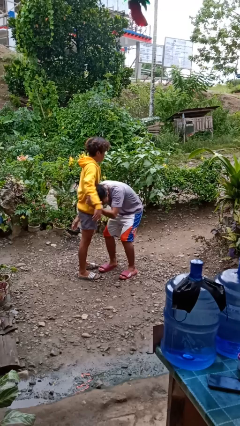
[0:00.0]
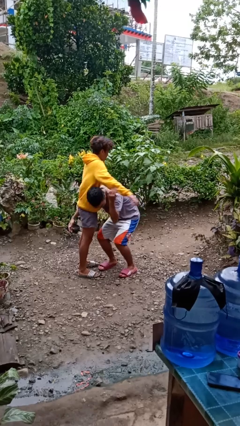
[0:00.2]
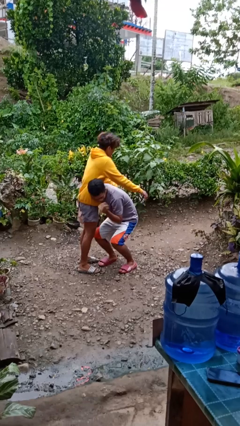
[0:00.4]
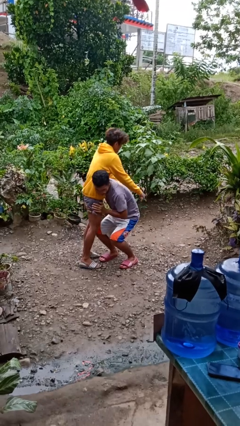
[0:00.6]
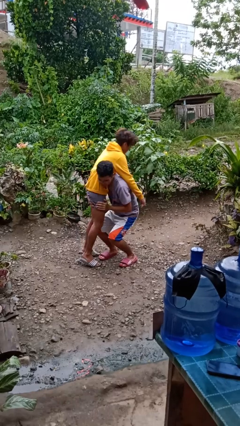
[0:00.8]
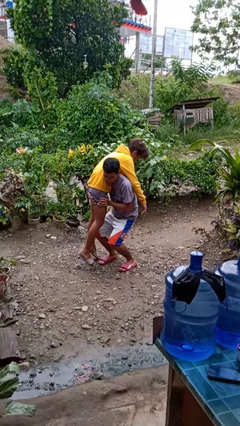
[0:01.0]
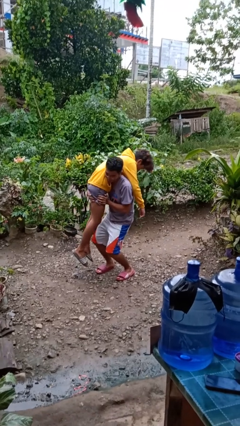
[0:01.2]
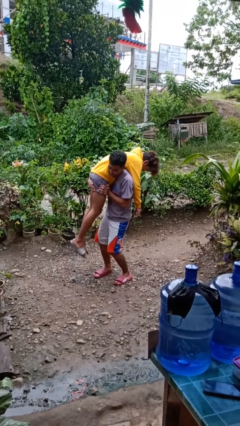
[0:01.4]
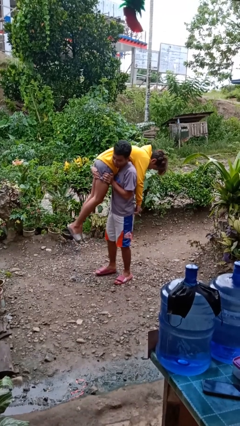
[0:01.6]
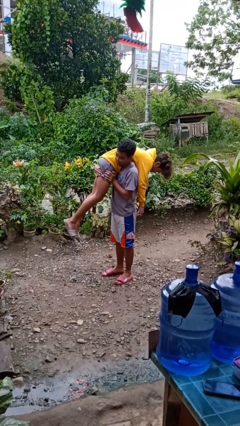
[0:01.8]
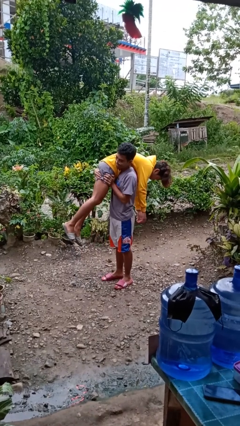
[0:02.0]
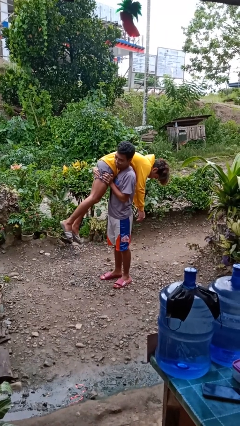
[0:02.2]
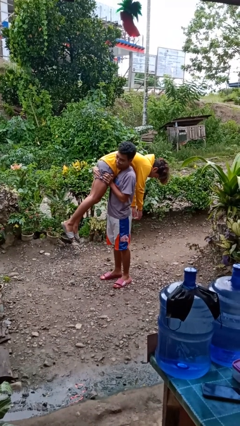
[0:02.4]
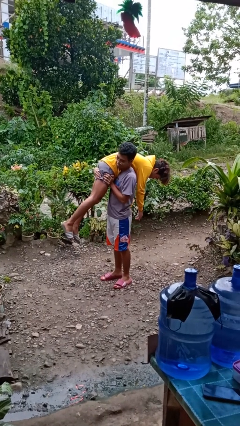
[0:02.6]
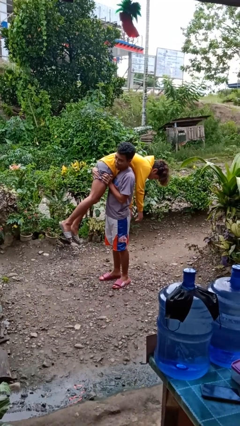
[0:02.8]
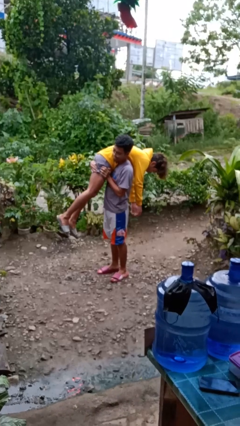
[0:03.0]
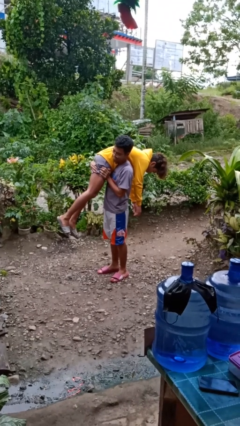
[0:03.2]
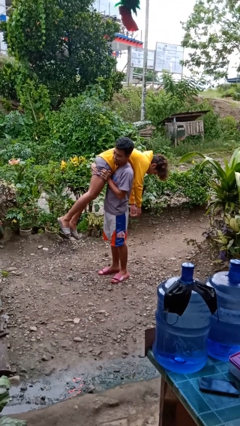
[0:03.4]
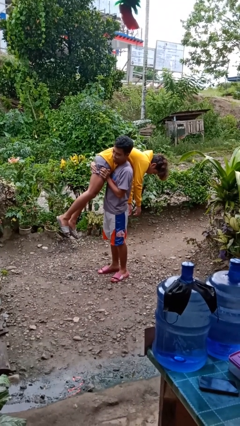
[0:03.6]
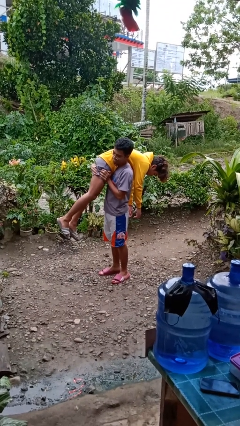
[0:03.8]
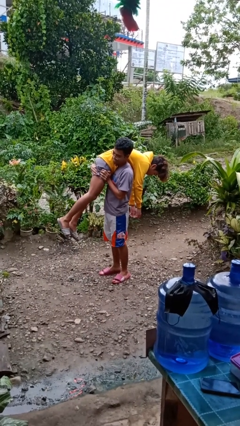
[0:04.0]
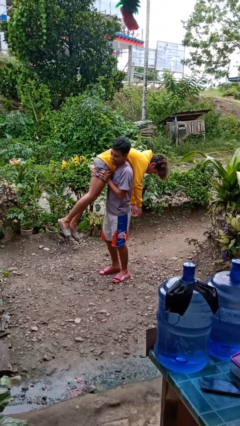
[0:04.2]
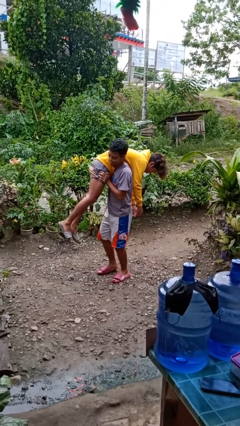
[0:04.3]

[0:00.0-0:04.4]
person carries person over shoulder

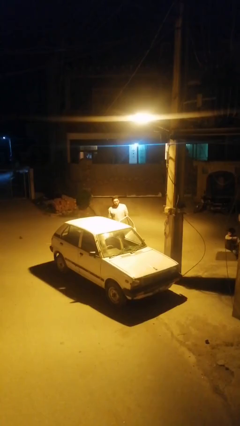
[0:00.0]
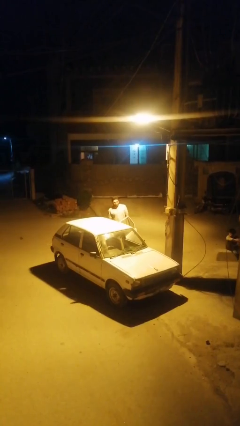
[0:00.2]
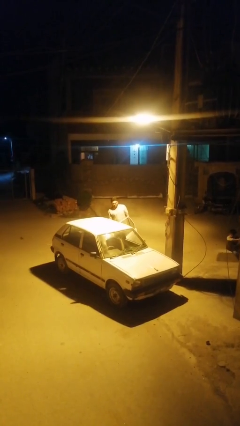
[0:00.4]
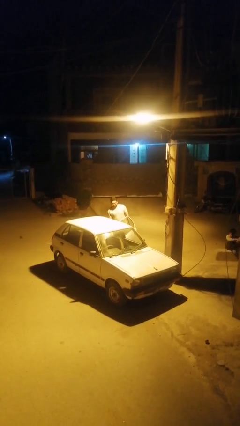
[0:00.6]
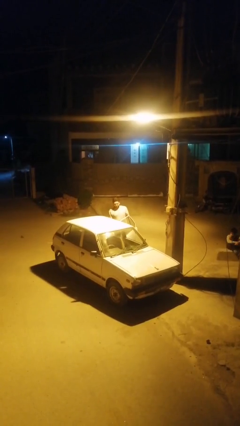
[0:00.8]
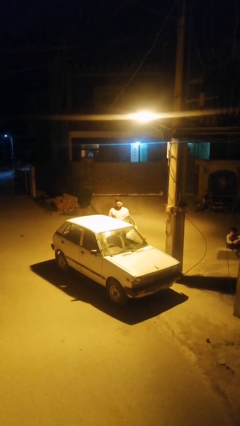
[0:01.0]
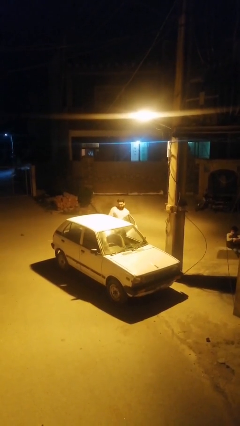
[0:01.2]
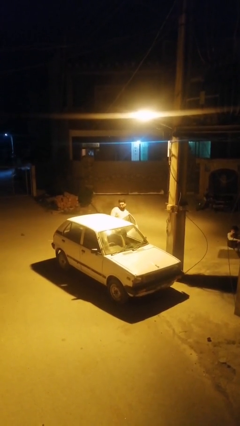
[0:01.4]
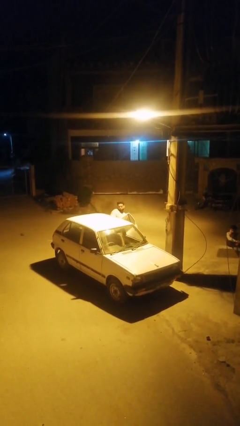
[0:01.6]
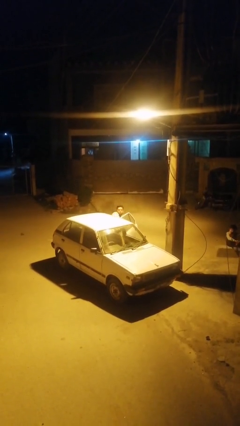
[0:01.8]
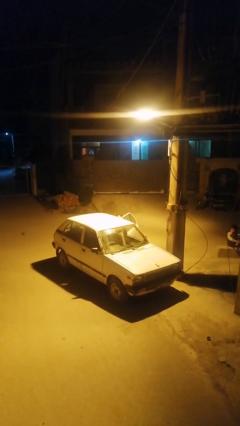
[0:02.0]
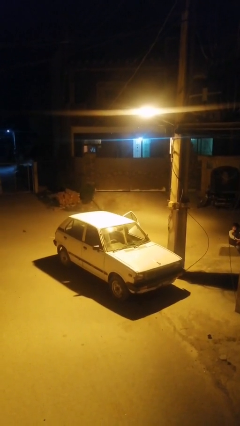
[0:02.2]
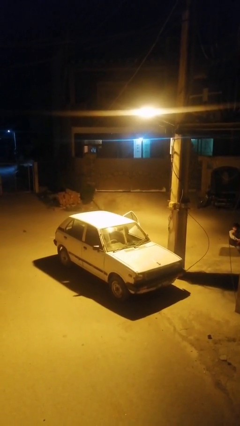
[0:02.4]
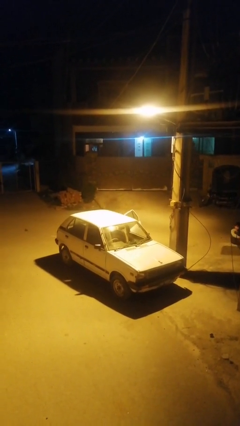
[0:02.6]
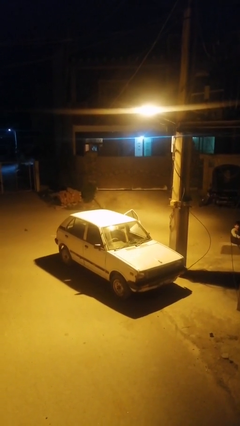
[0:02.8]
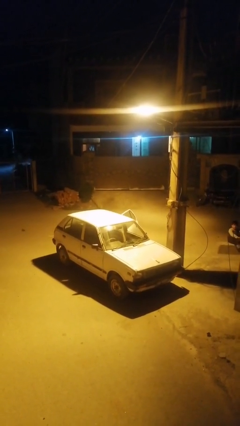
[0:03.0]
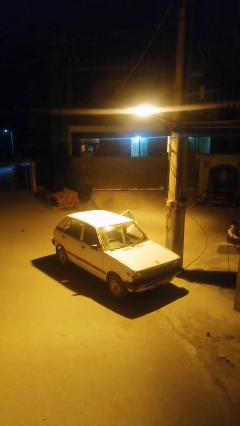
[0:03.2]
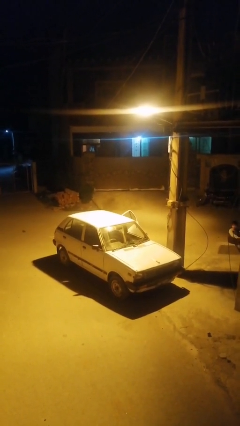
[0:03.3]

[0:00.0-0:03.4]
person enters car

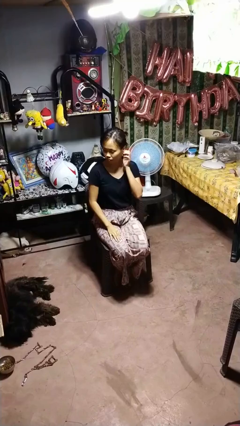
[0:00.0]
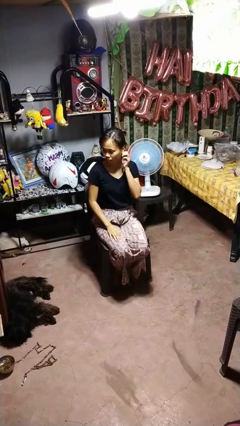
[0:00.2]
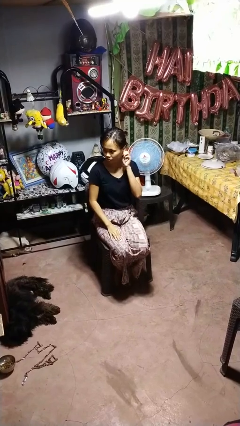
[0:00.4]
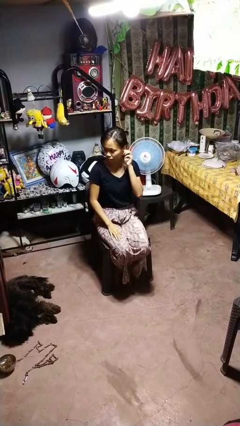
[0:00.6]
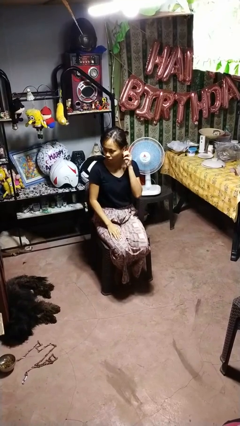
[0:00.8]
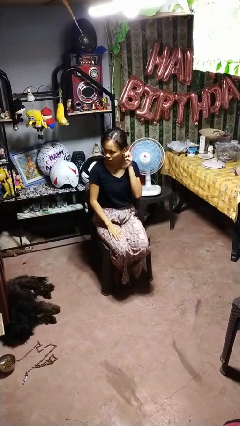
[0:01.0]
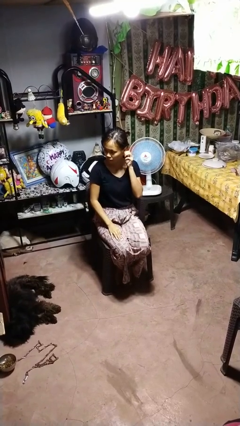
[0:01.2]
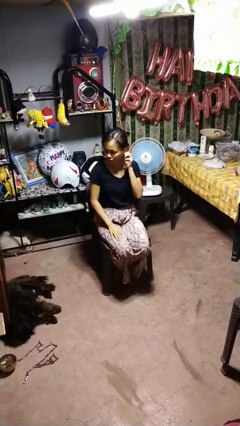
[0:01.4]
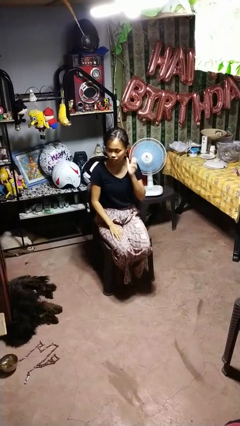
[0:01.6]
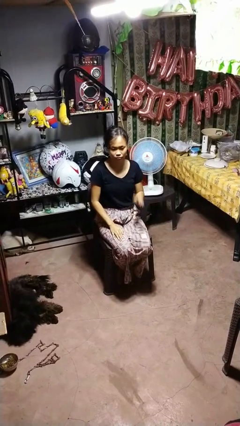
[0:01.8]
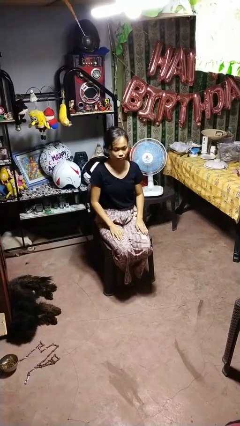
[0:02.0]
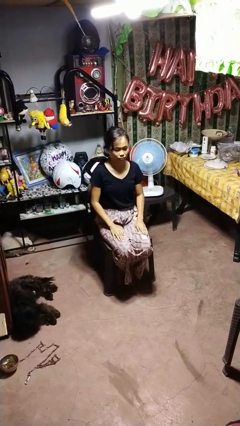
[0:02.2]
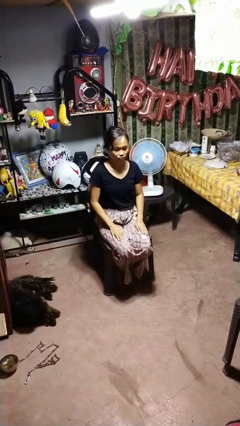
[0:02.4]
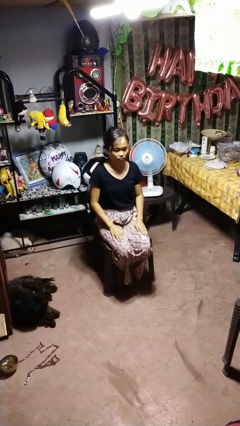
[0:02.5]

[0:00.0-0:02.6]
person touches earlobe

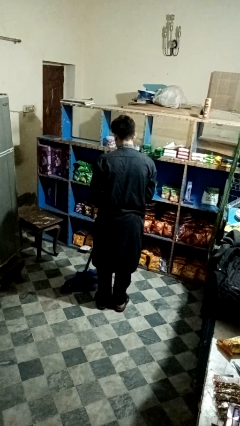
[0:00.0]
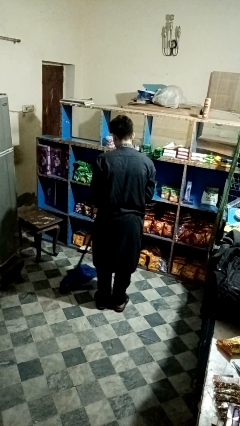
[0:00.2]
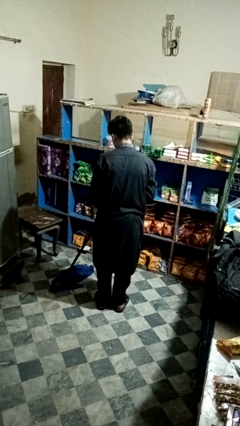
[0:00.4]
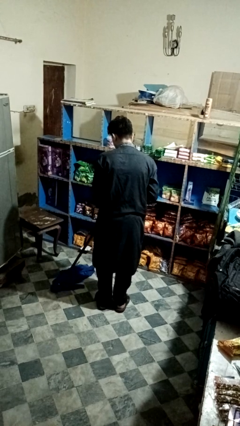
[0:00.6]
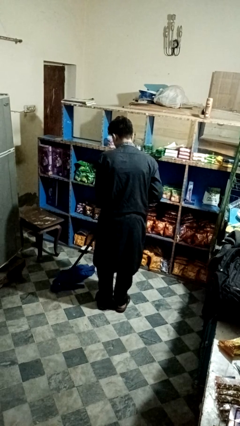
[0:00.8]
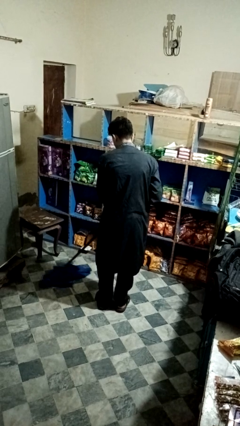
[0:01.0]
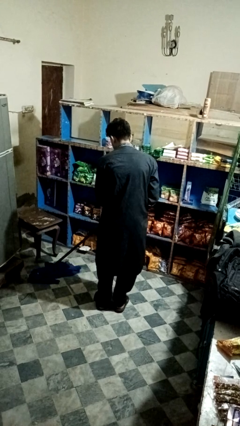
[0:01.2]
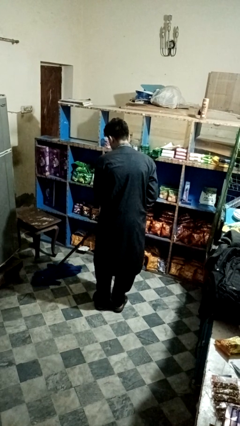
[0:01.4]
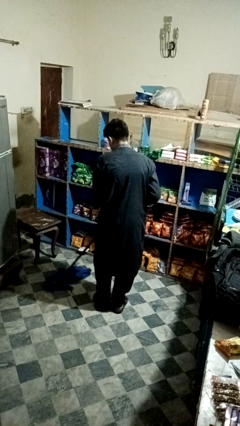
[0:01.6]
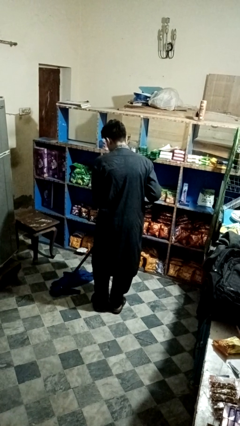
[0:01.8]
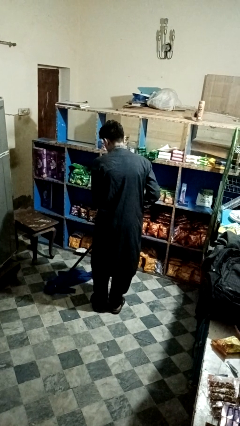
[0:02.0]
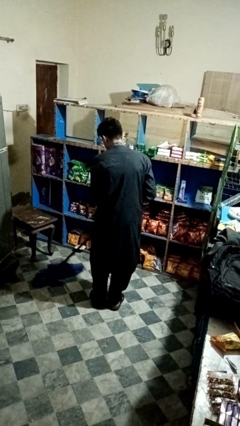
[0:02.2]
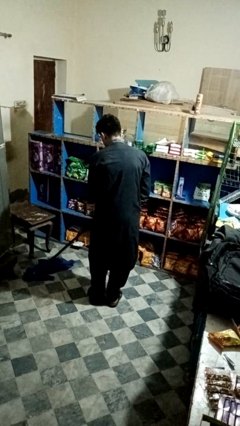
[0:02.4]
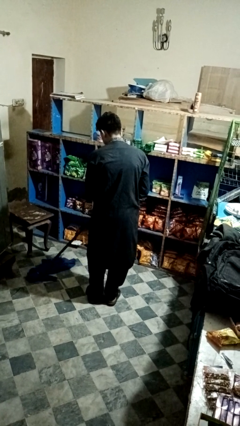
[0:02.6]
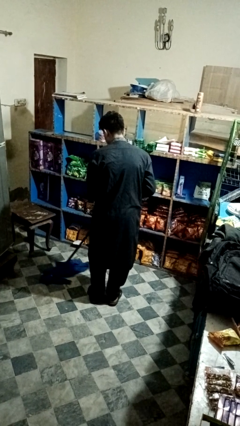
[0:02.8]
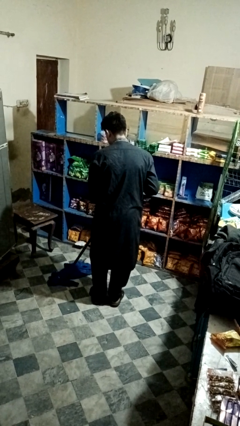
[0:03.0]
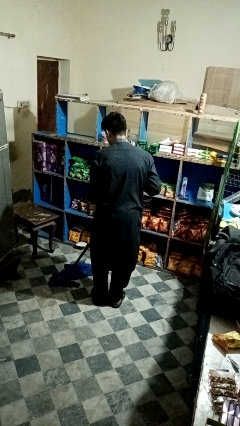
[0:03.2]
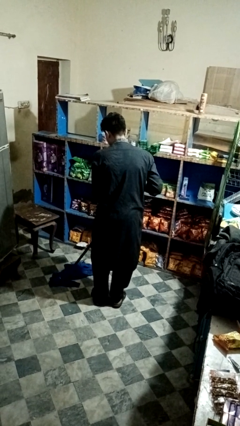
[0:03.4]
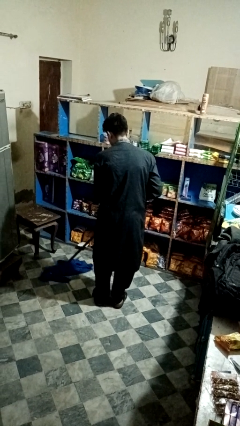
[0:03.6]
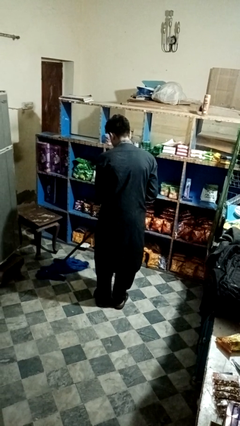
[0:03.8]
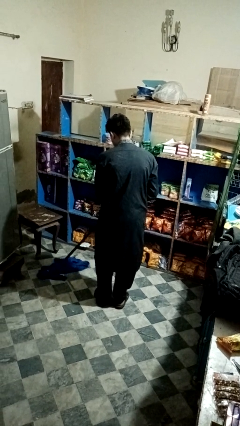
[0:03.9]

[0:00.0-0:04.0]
person mops

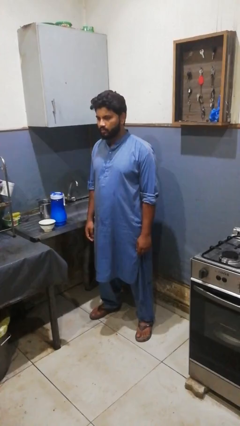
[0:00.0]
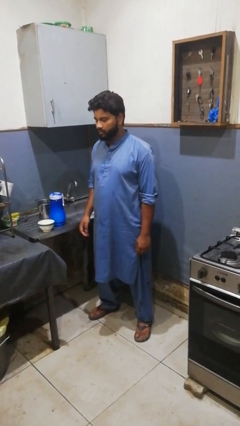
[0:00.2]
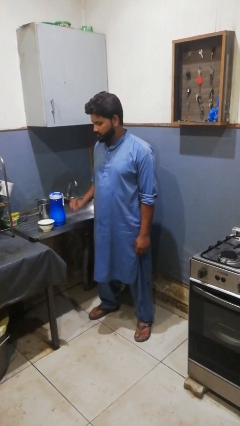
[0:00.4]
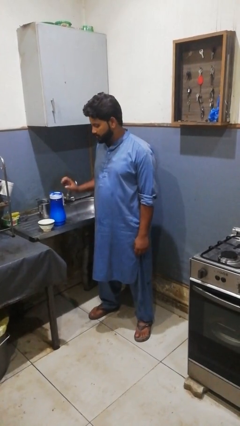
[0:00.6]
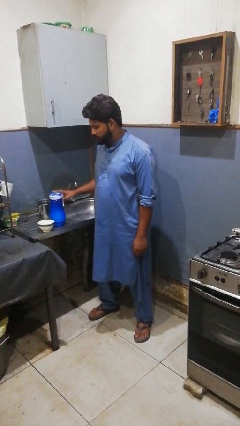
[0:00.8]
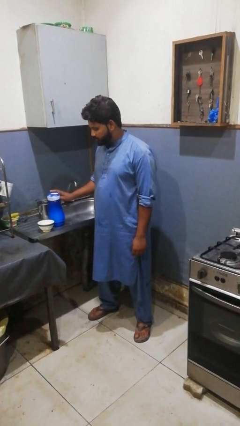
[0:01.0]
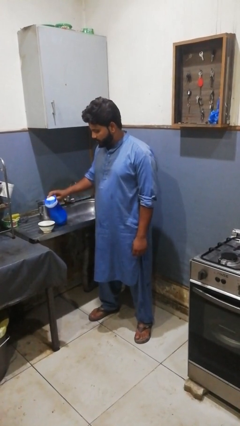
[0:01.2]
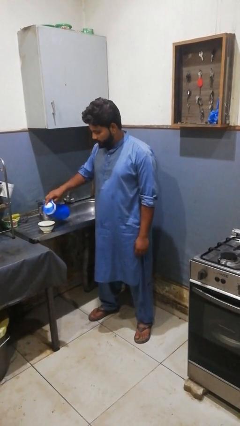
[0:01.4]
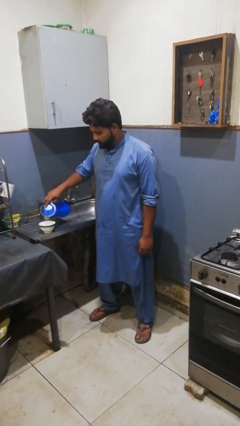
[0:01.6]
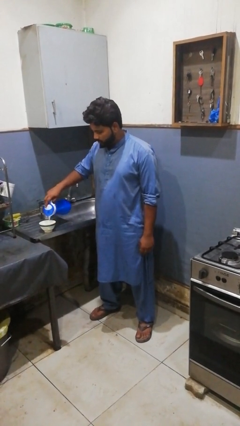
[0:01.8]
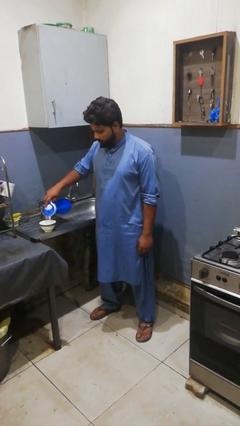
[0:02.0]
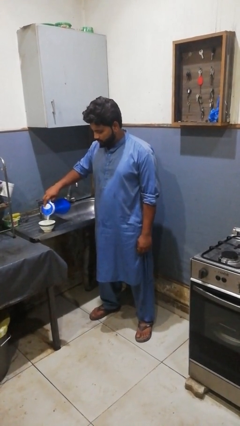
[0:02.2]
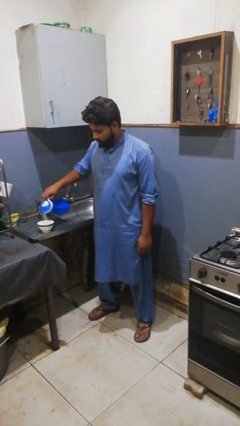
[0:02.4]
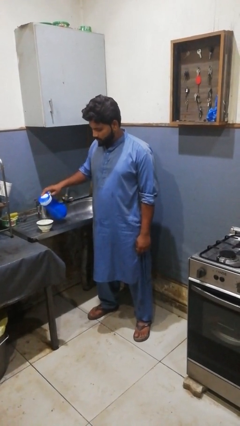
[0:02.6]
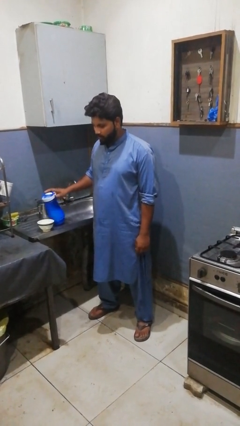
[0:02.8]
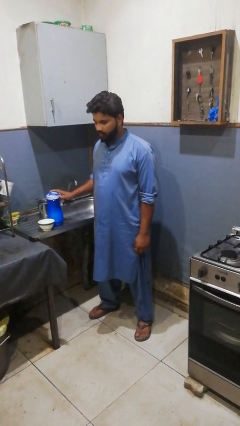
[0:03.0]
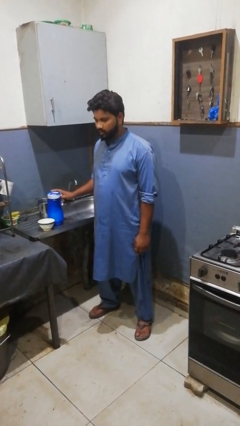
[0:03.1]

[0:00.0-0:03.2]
person pours into bowl
